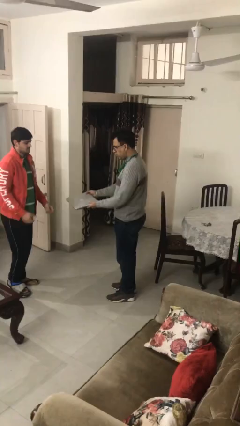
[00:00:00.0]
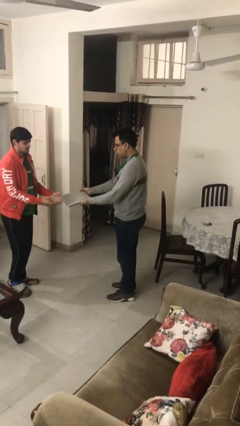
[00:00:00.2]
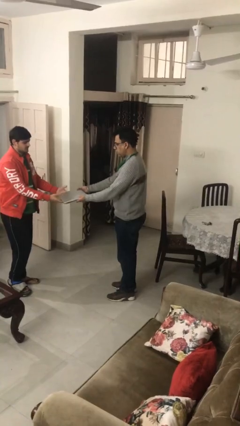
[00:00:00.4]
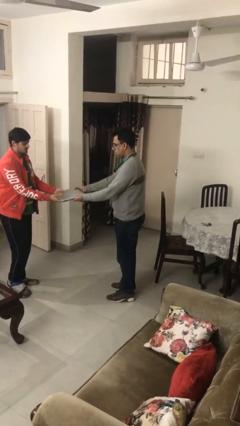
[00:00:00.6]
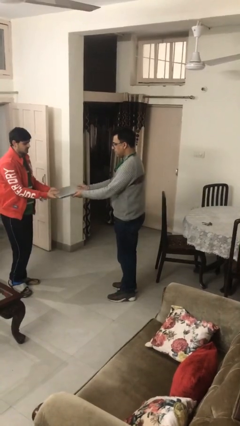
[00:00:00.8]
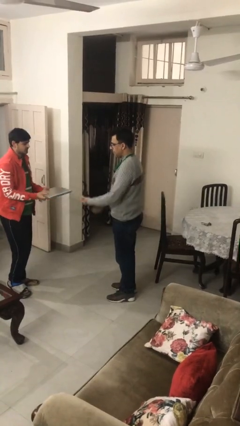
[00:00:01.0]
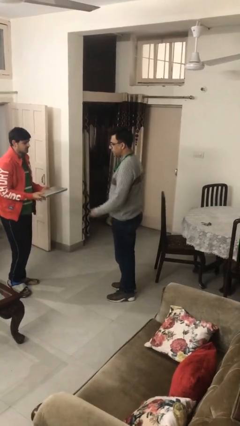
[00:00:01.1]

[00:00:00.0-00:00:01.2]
person transfers object to person

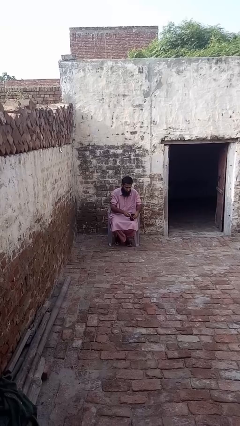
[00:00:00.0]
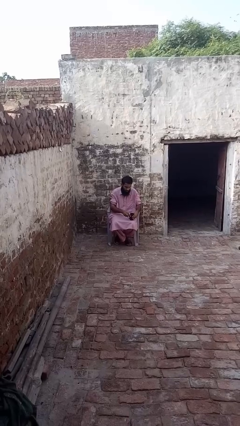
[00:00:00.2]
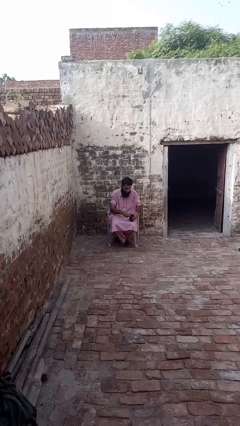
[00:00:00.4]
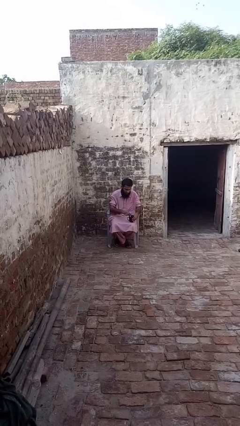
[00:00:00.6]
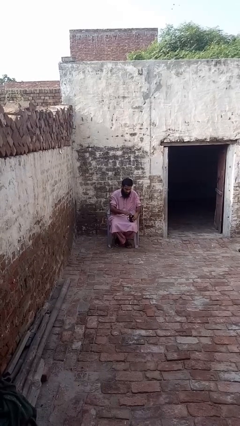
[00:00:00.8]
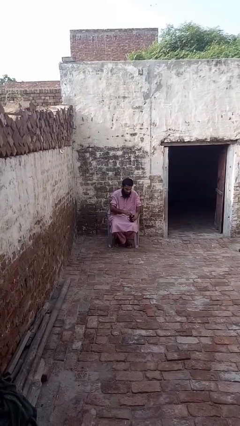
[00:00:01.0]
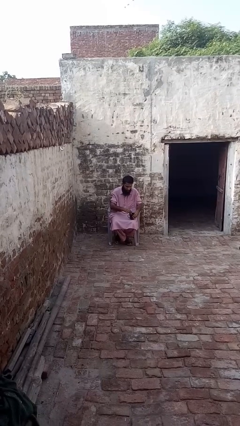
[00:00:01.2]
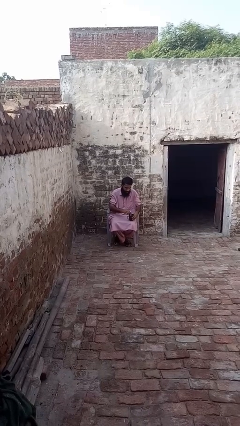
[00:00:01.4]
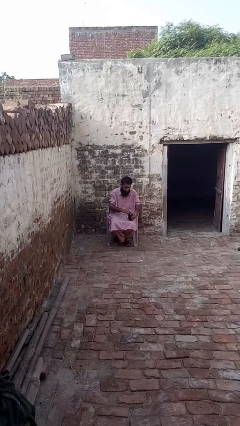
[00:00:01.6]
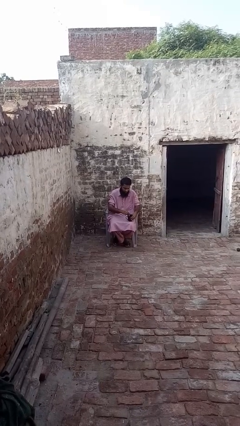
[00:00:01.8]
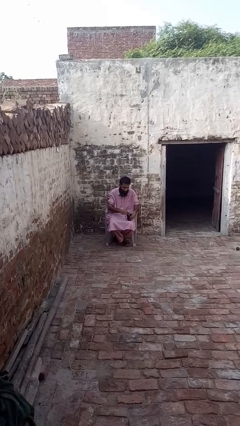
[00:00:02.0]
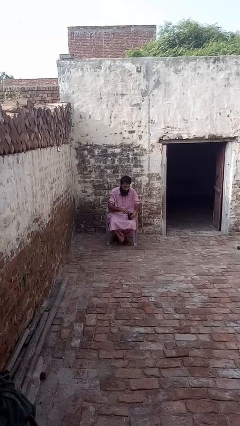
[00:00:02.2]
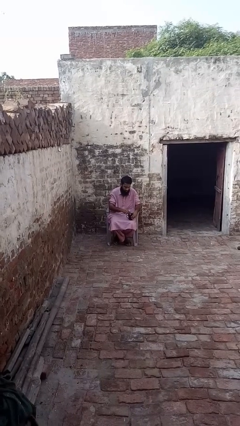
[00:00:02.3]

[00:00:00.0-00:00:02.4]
person stirs mug

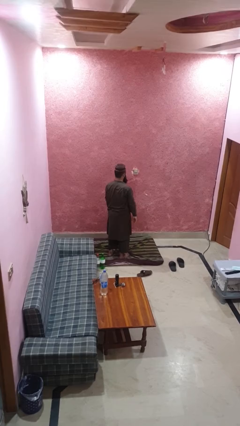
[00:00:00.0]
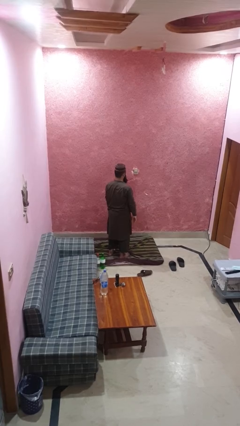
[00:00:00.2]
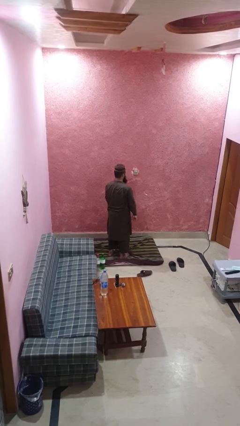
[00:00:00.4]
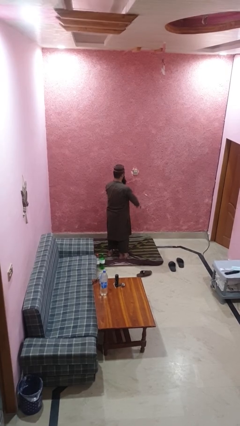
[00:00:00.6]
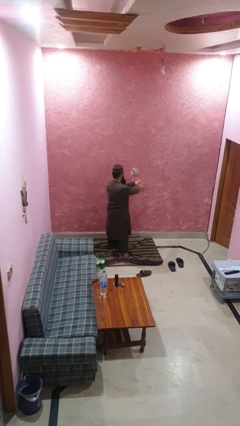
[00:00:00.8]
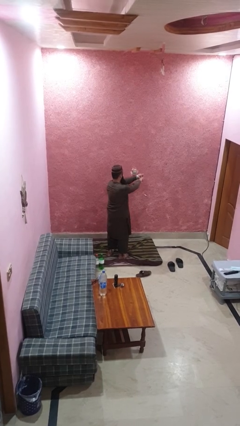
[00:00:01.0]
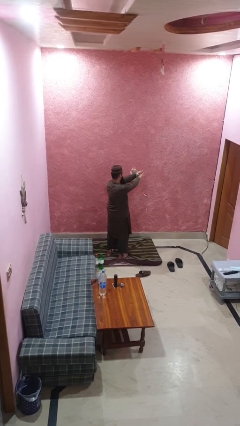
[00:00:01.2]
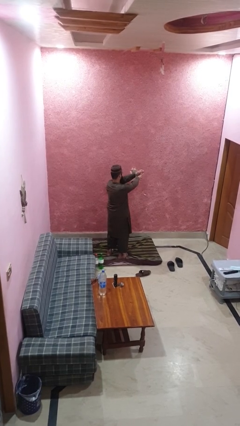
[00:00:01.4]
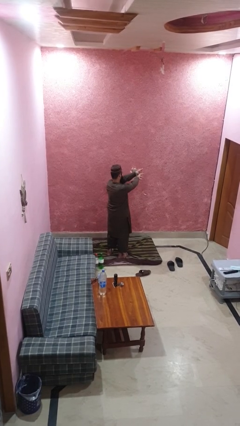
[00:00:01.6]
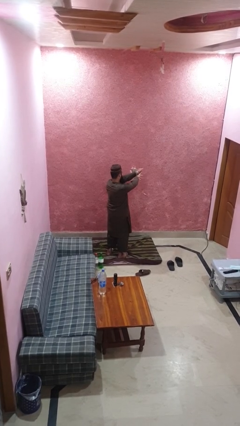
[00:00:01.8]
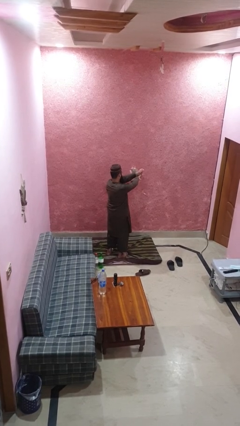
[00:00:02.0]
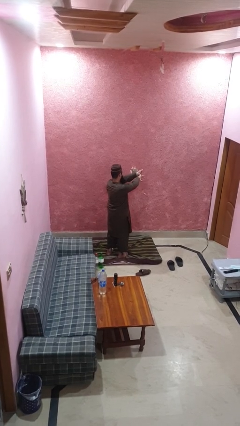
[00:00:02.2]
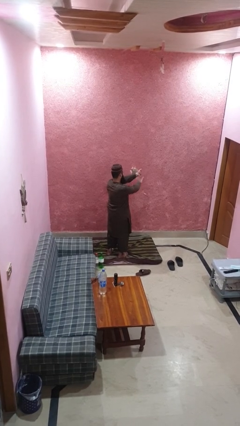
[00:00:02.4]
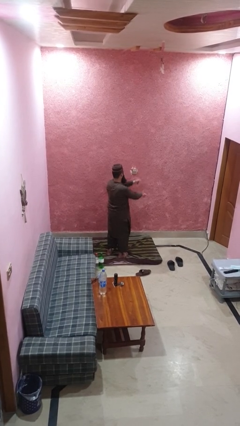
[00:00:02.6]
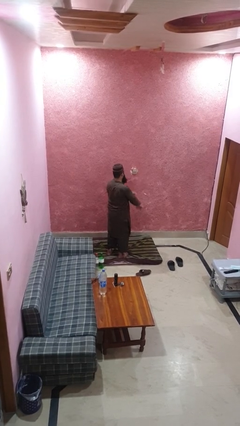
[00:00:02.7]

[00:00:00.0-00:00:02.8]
person snaps fingers

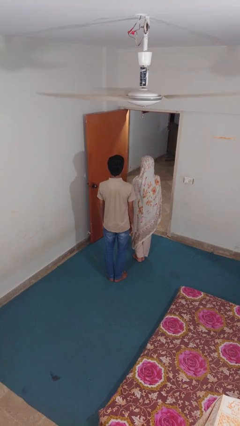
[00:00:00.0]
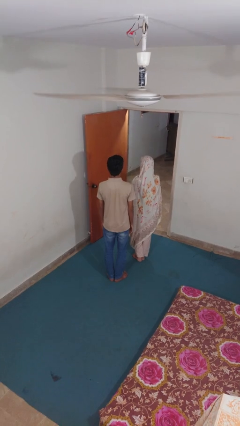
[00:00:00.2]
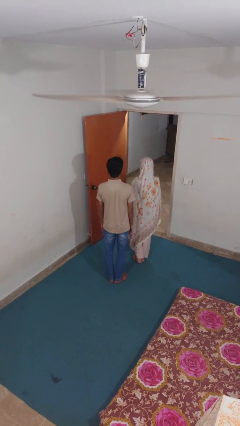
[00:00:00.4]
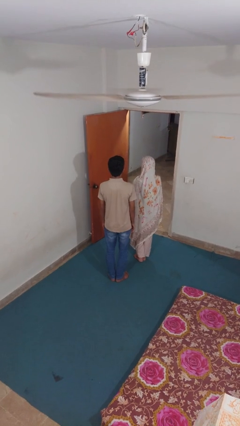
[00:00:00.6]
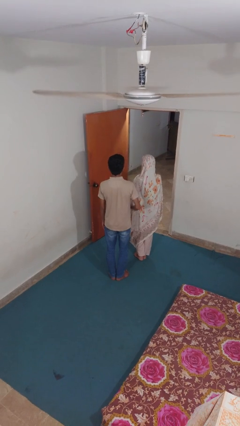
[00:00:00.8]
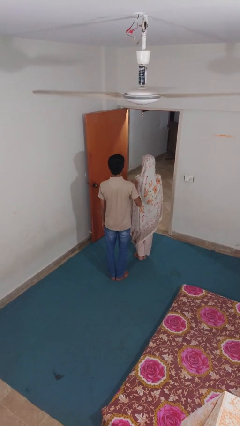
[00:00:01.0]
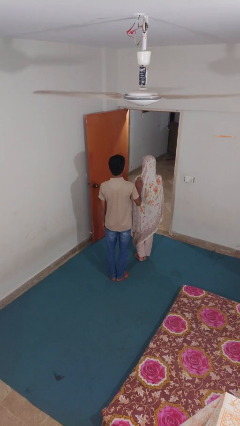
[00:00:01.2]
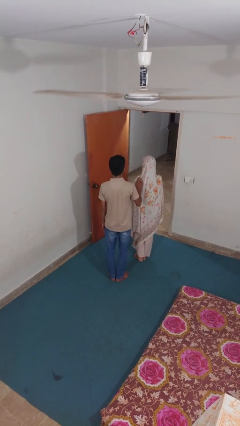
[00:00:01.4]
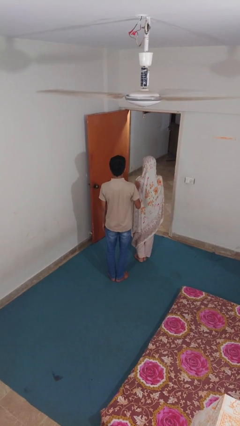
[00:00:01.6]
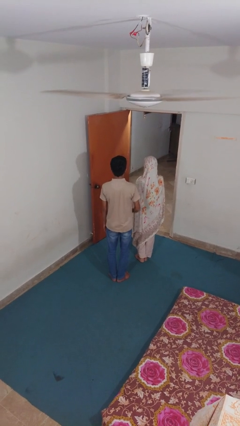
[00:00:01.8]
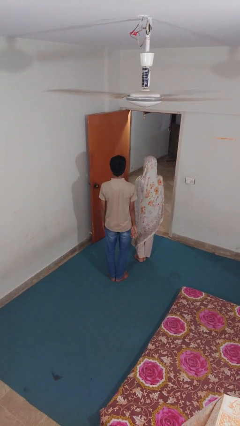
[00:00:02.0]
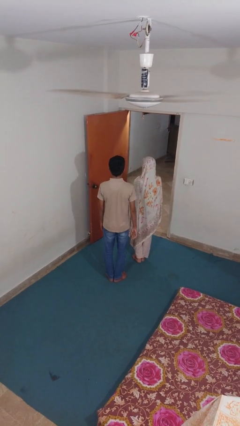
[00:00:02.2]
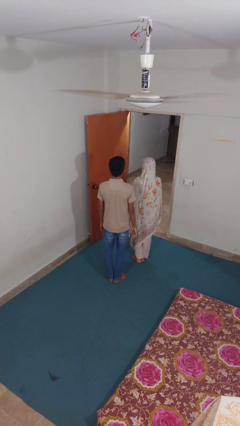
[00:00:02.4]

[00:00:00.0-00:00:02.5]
person touches back of person

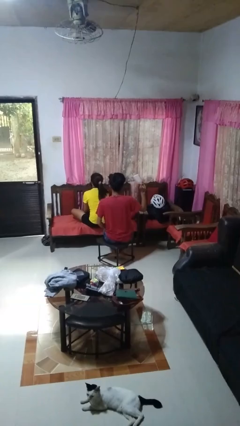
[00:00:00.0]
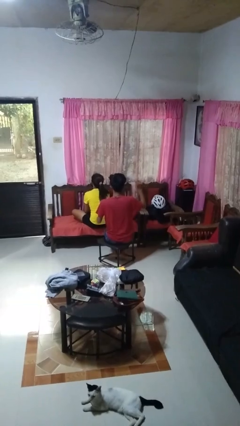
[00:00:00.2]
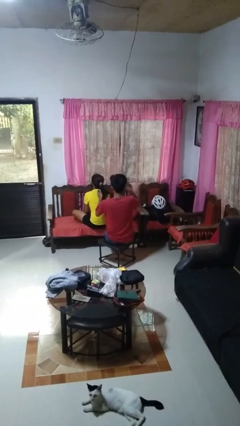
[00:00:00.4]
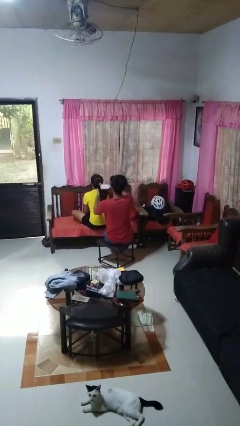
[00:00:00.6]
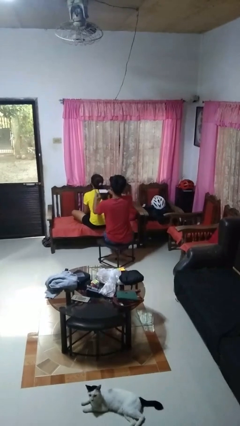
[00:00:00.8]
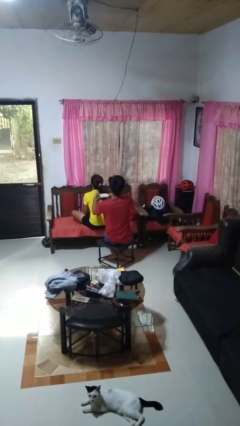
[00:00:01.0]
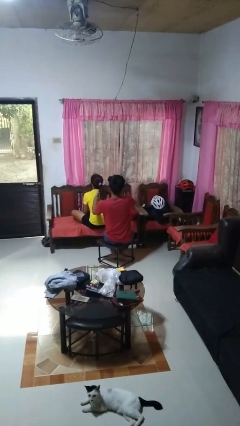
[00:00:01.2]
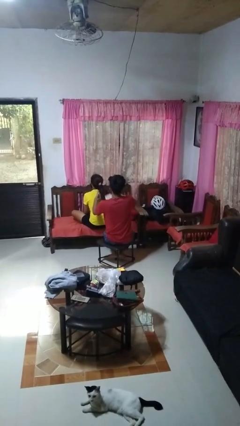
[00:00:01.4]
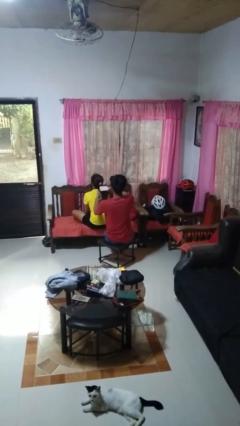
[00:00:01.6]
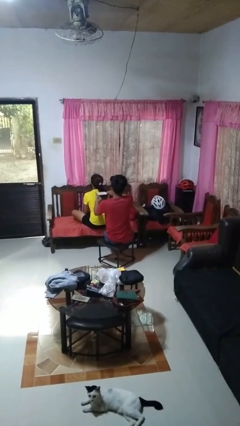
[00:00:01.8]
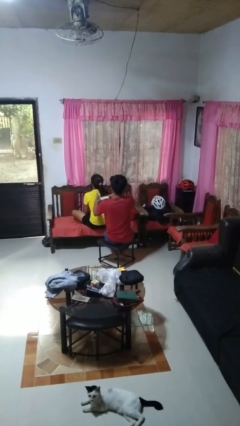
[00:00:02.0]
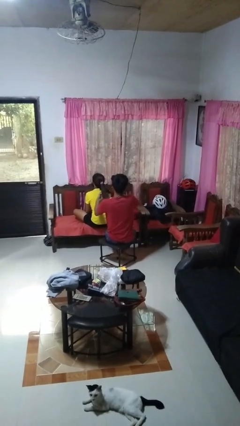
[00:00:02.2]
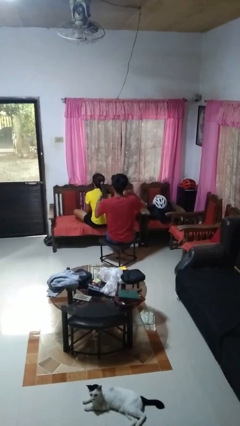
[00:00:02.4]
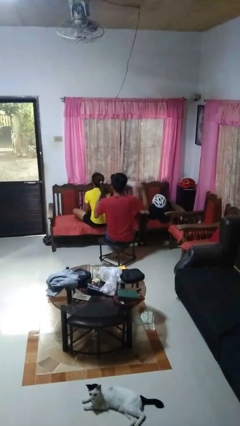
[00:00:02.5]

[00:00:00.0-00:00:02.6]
person brushes hair of person

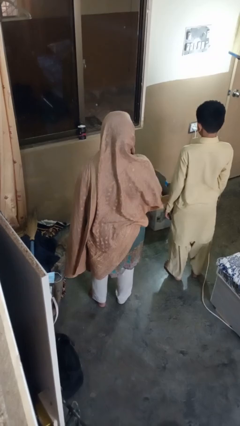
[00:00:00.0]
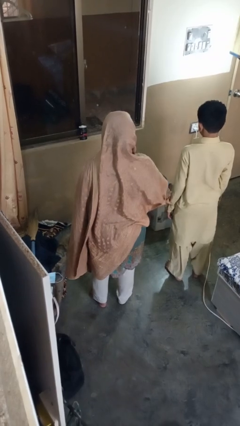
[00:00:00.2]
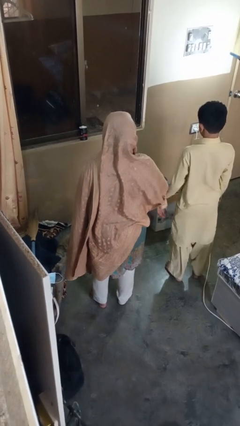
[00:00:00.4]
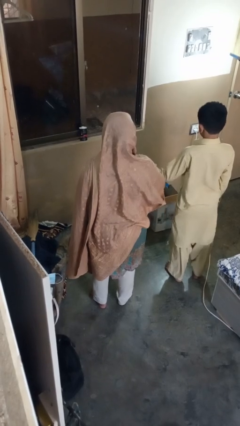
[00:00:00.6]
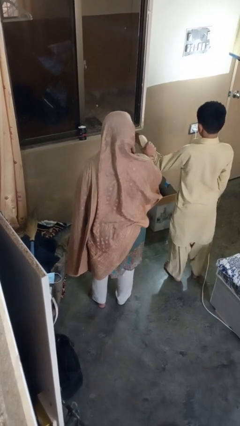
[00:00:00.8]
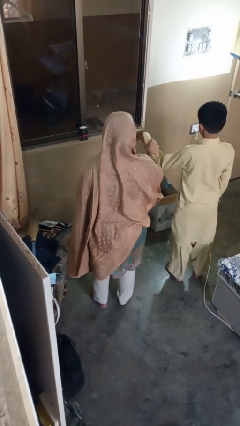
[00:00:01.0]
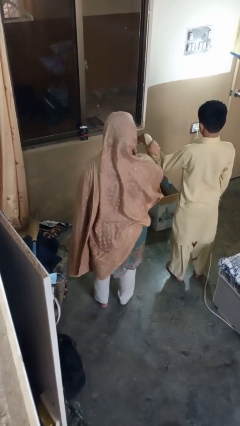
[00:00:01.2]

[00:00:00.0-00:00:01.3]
person grabs person by forearm

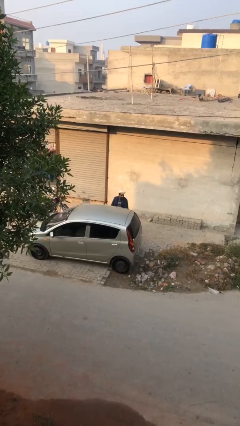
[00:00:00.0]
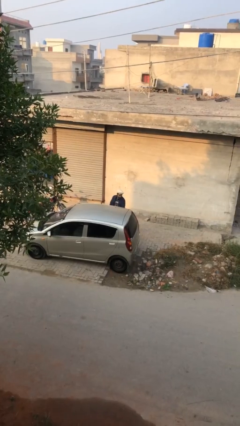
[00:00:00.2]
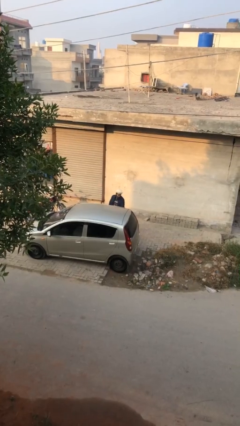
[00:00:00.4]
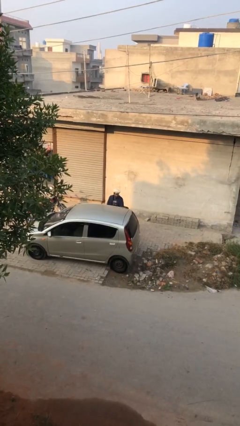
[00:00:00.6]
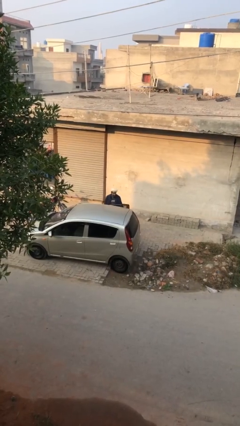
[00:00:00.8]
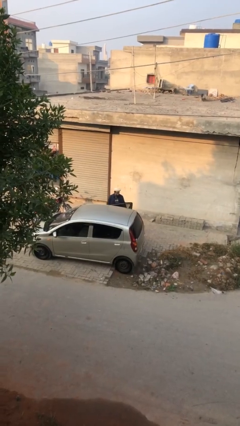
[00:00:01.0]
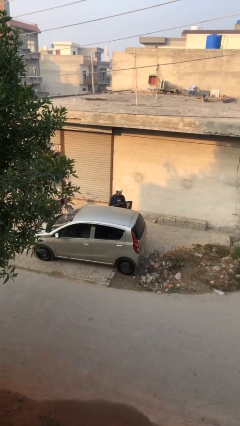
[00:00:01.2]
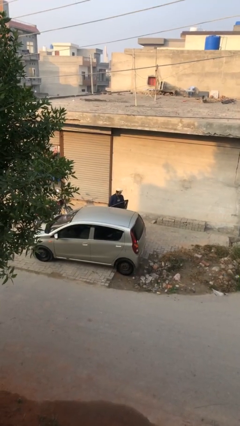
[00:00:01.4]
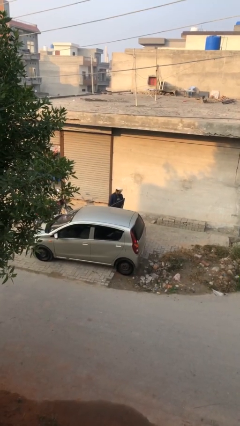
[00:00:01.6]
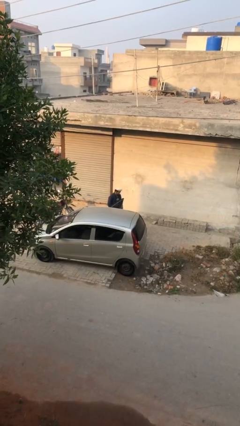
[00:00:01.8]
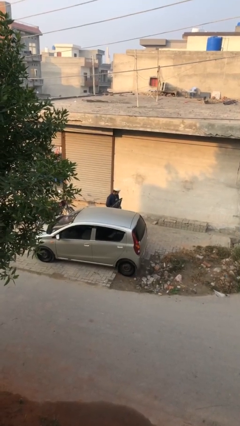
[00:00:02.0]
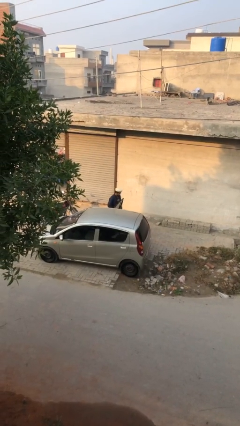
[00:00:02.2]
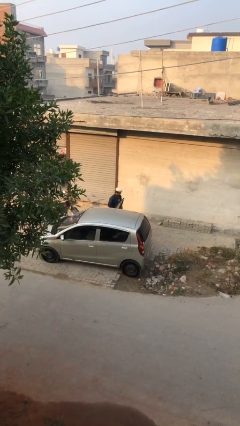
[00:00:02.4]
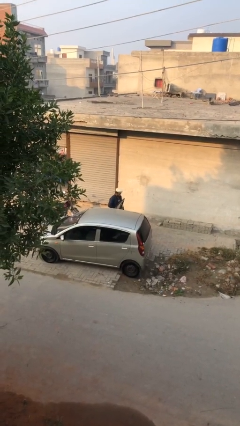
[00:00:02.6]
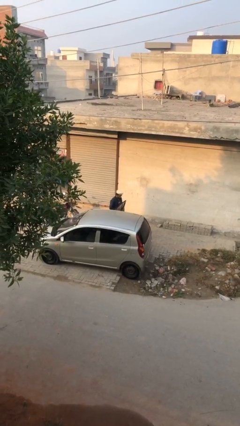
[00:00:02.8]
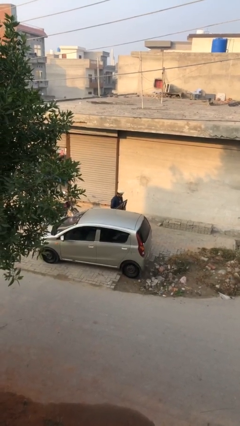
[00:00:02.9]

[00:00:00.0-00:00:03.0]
person opens car door

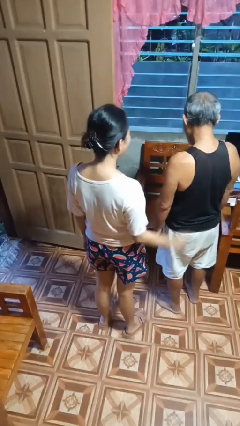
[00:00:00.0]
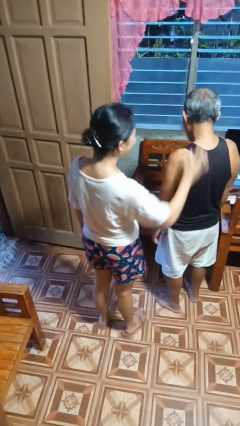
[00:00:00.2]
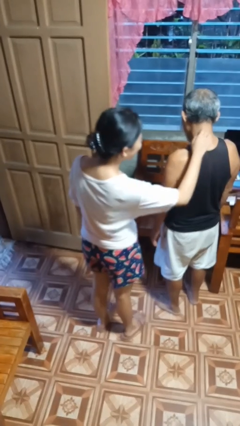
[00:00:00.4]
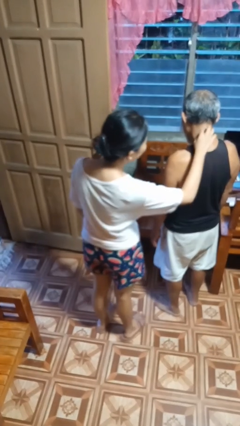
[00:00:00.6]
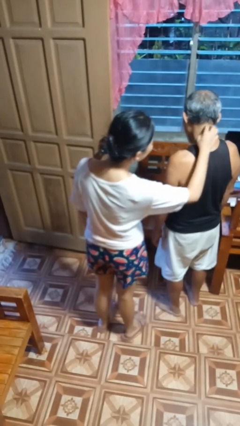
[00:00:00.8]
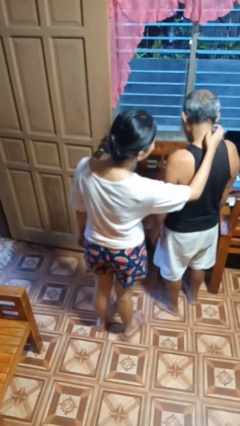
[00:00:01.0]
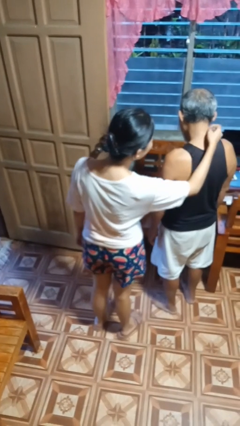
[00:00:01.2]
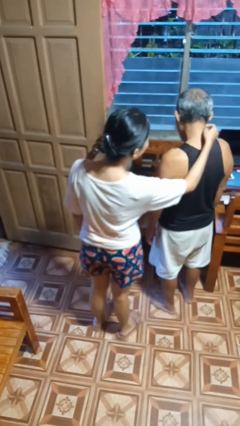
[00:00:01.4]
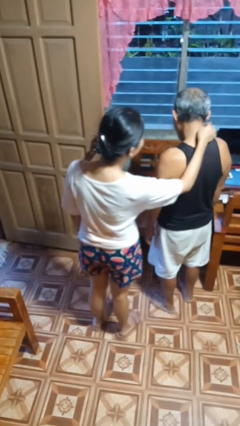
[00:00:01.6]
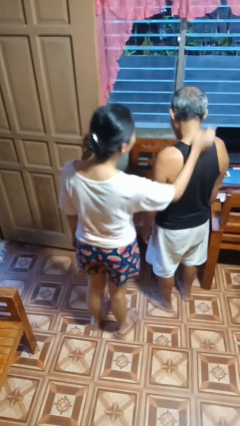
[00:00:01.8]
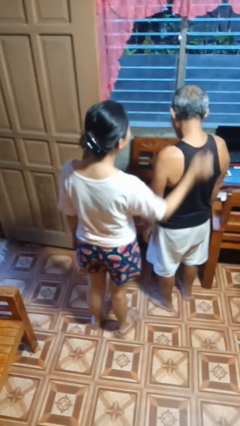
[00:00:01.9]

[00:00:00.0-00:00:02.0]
person tickles person
